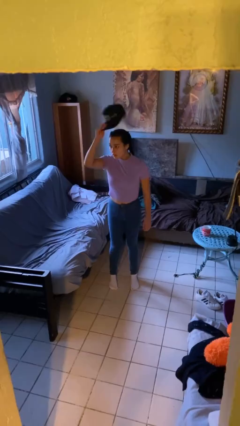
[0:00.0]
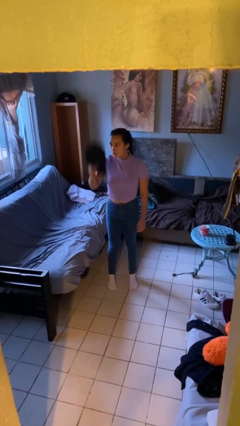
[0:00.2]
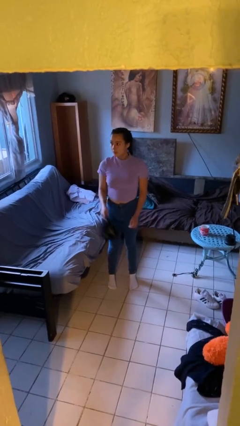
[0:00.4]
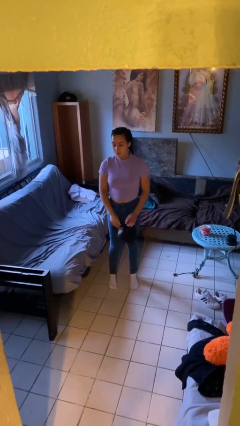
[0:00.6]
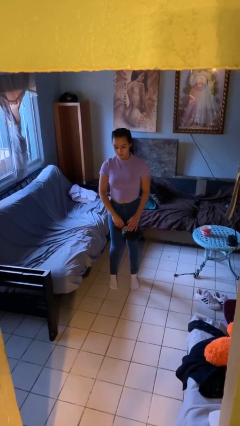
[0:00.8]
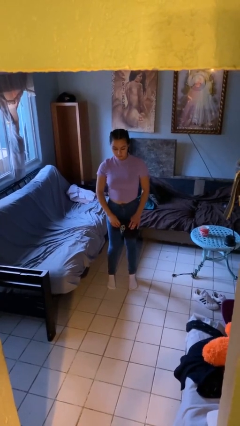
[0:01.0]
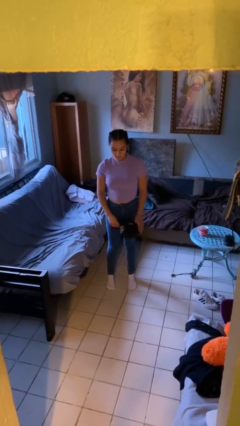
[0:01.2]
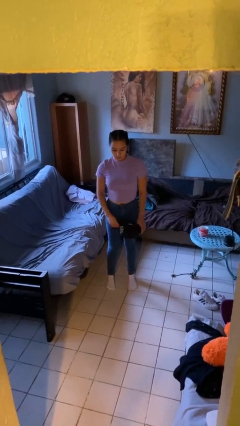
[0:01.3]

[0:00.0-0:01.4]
person takes off hat

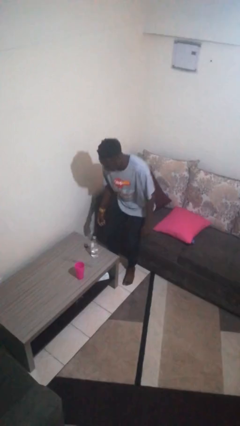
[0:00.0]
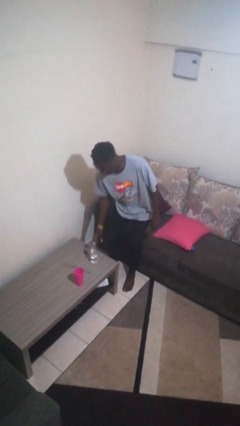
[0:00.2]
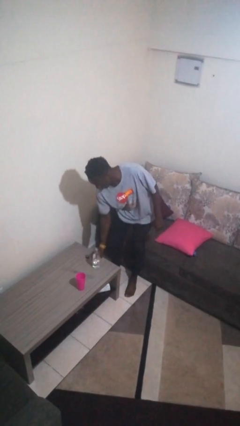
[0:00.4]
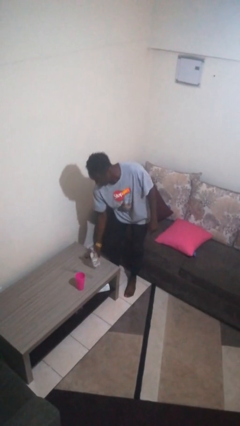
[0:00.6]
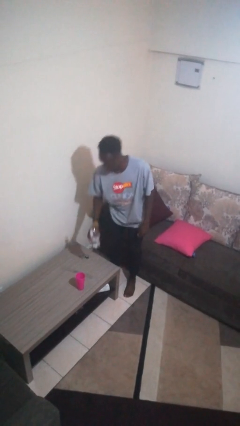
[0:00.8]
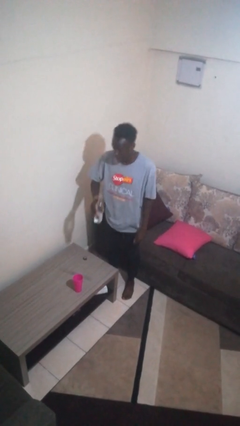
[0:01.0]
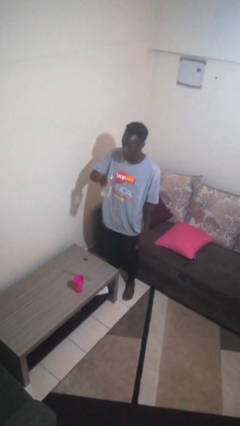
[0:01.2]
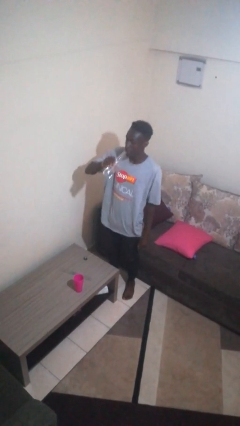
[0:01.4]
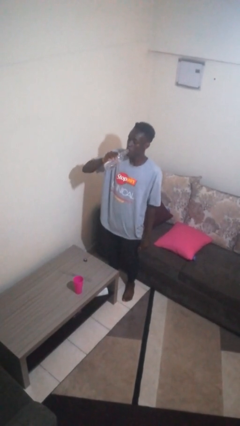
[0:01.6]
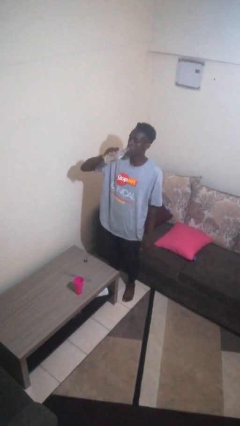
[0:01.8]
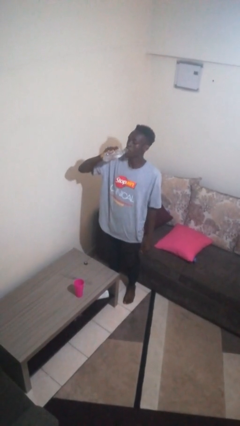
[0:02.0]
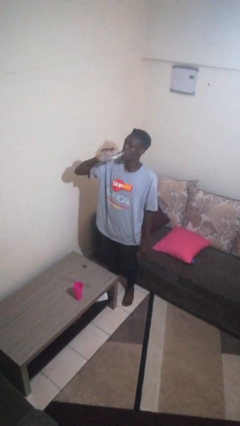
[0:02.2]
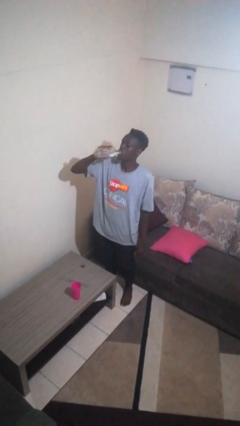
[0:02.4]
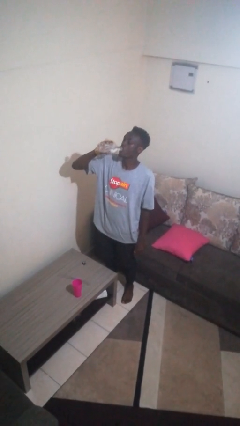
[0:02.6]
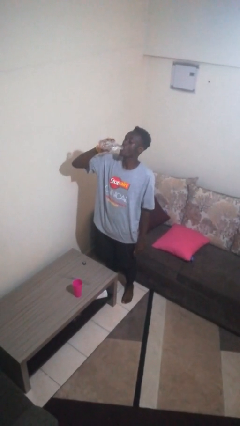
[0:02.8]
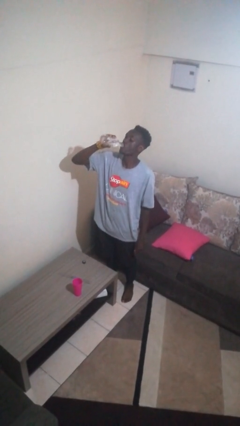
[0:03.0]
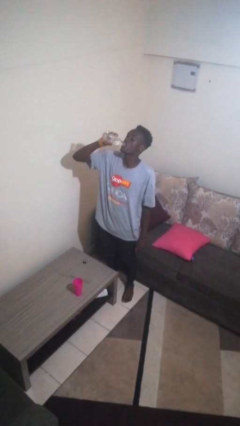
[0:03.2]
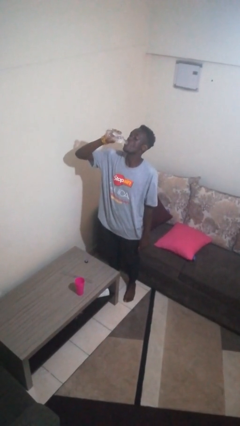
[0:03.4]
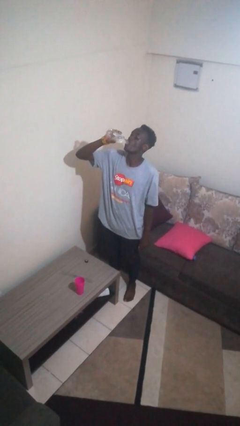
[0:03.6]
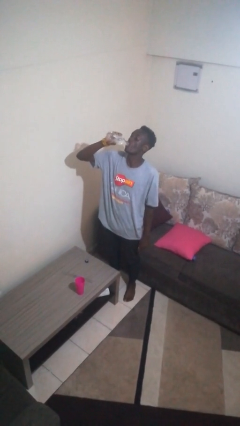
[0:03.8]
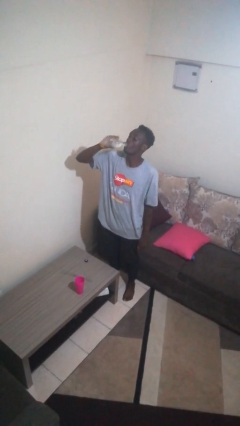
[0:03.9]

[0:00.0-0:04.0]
person drinks from bottle

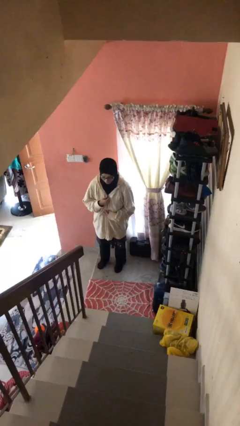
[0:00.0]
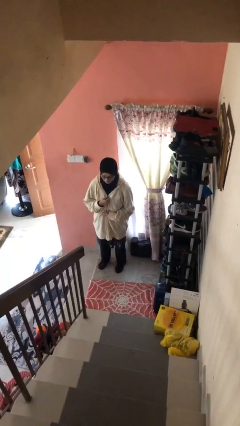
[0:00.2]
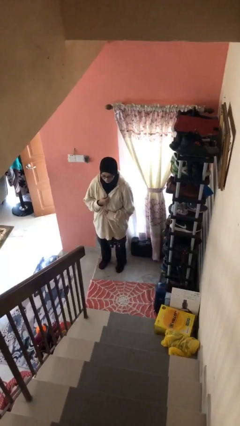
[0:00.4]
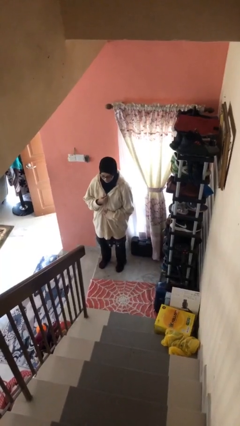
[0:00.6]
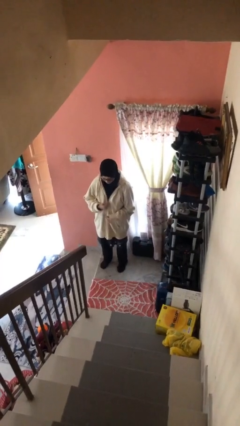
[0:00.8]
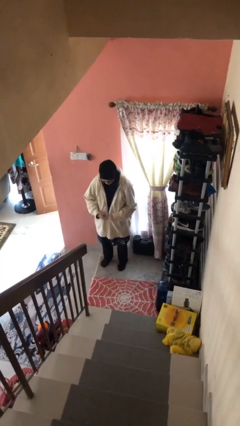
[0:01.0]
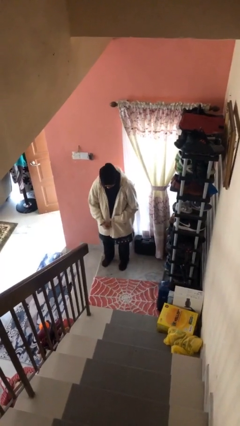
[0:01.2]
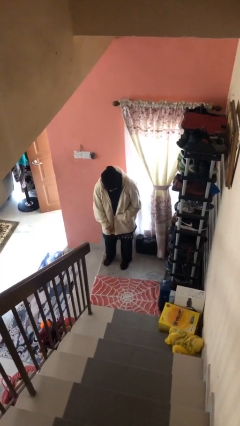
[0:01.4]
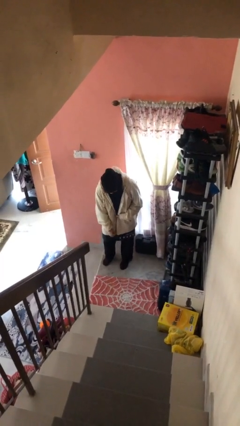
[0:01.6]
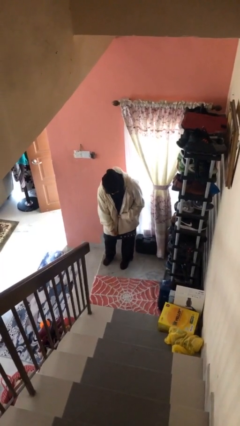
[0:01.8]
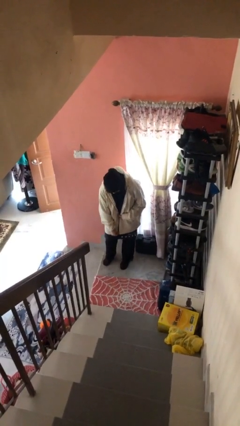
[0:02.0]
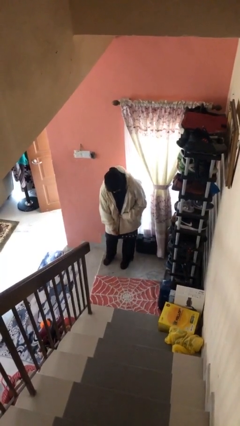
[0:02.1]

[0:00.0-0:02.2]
person unzips jacket

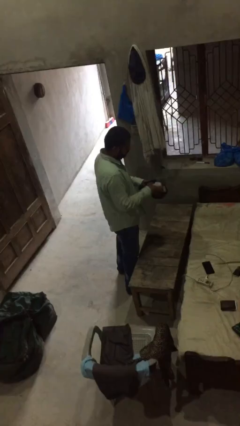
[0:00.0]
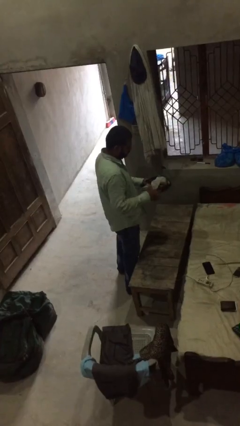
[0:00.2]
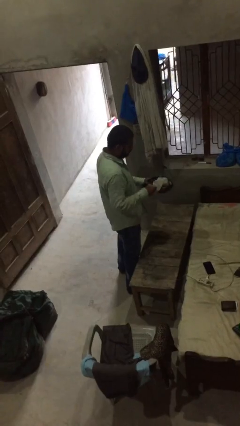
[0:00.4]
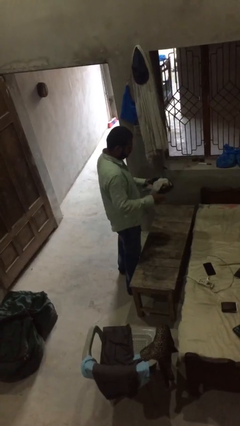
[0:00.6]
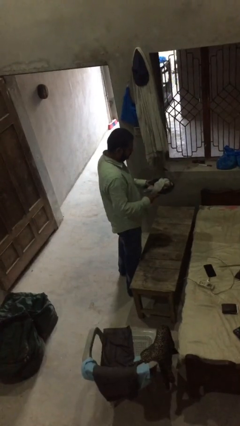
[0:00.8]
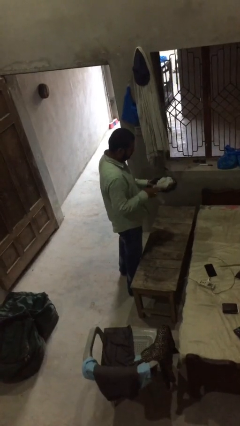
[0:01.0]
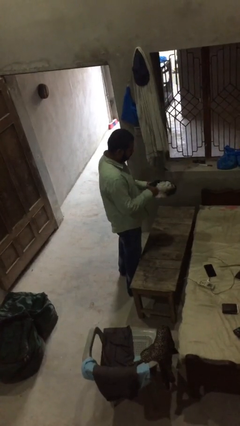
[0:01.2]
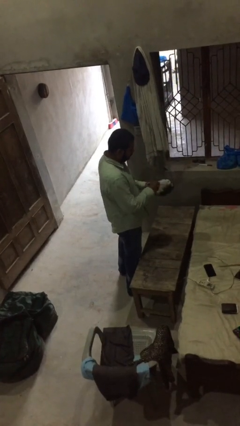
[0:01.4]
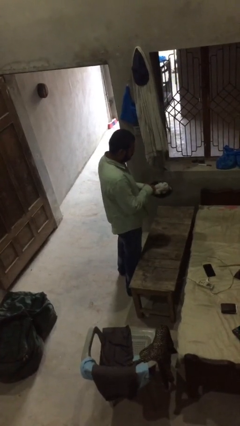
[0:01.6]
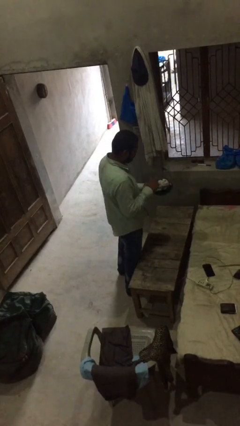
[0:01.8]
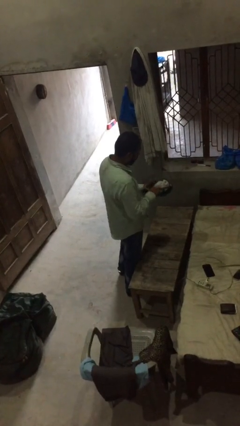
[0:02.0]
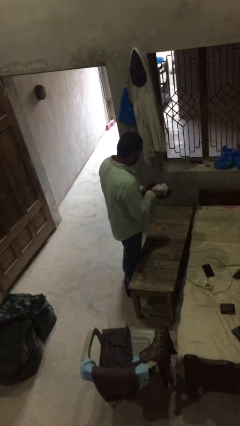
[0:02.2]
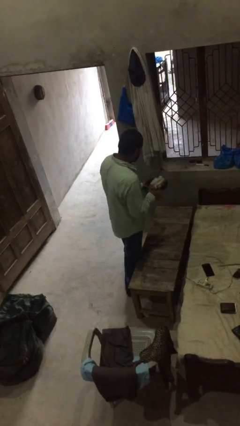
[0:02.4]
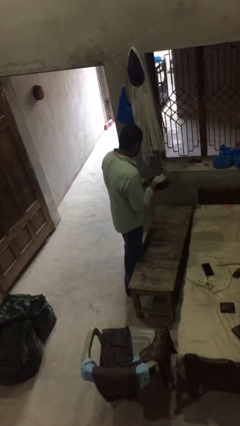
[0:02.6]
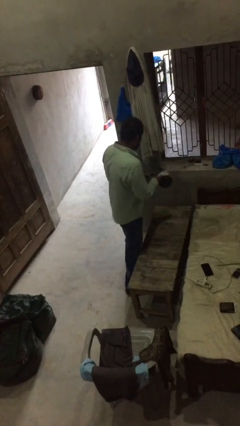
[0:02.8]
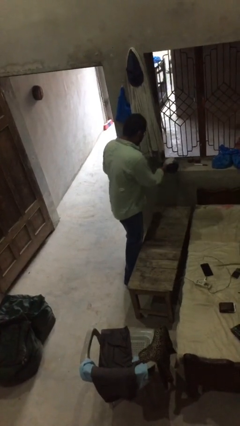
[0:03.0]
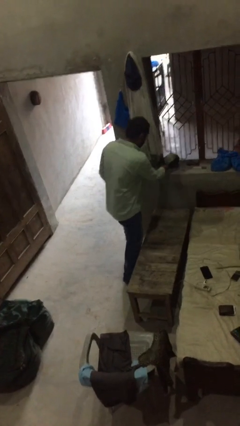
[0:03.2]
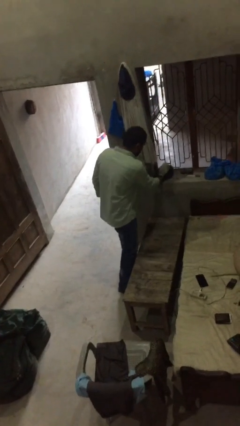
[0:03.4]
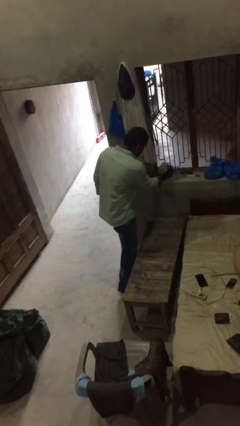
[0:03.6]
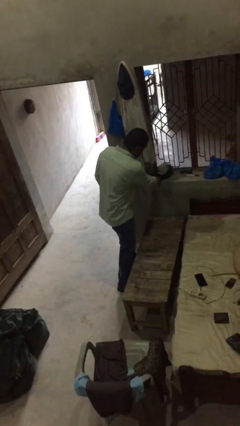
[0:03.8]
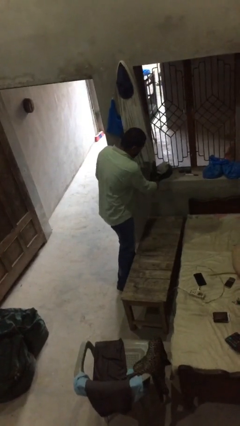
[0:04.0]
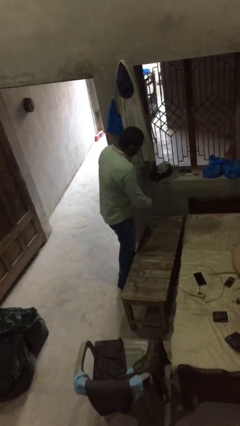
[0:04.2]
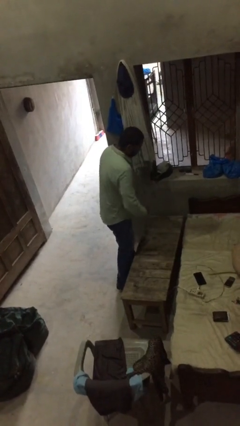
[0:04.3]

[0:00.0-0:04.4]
person puts down object on shelf

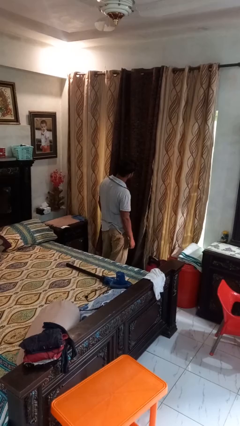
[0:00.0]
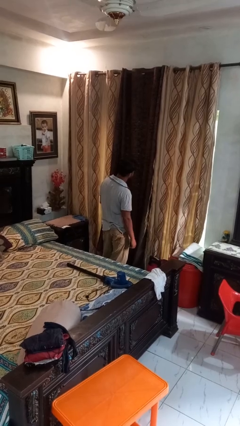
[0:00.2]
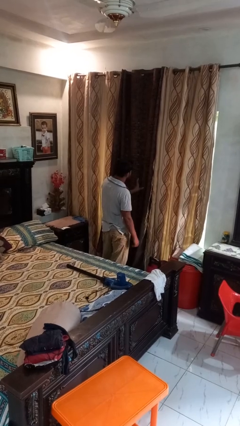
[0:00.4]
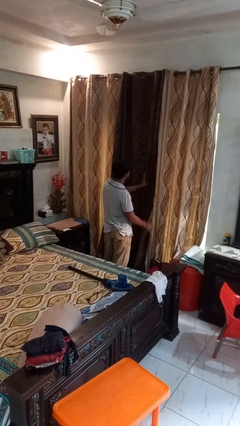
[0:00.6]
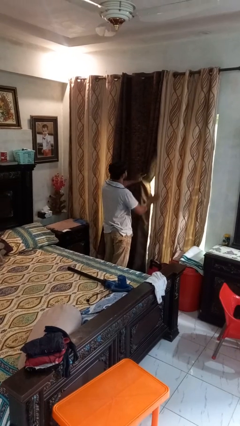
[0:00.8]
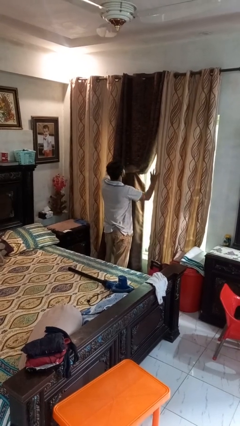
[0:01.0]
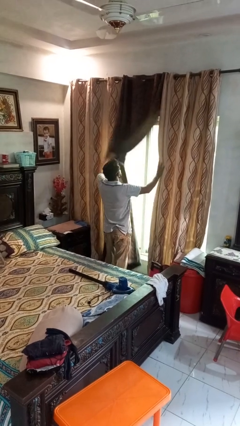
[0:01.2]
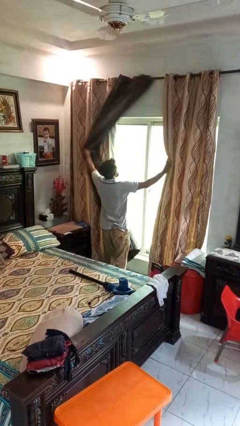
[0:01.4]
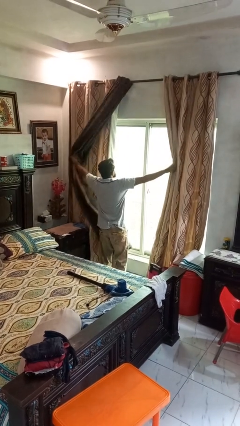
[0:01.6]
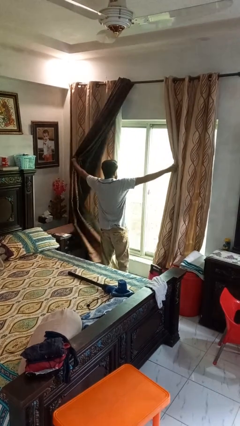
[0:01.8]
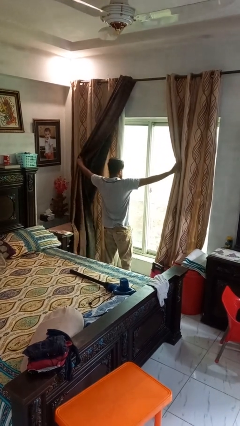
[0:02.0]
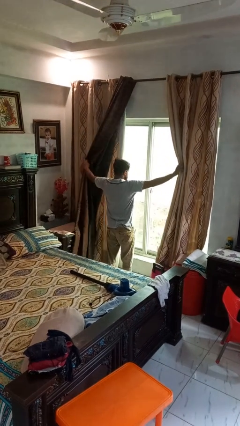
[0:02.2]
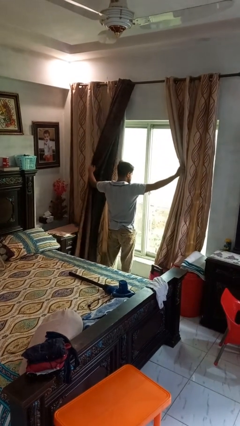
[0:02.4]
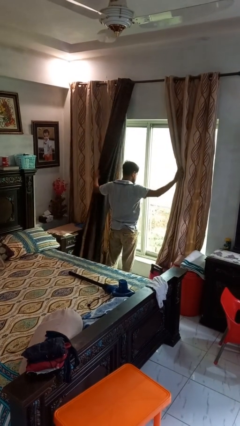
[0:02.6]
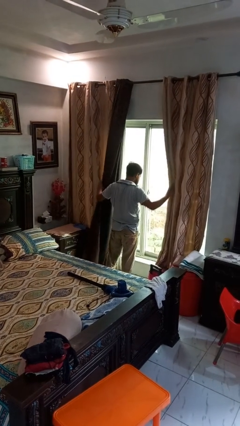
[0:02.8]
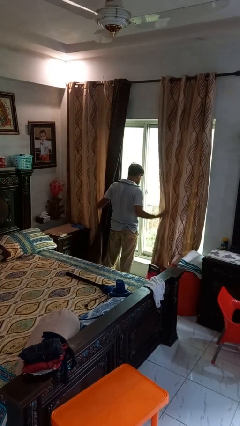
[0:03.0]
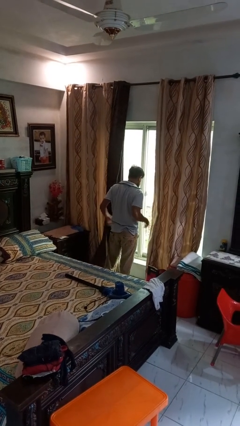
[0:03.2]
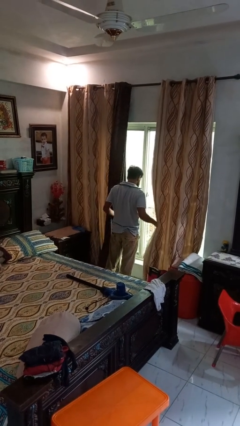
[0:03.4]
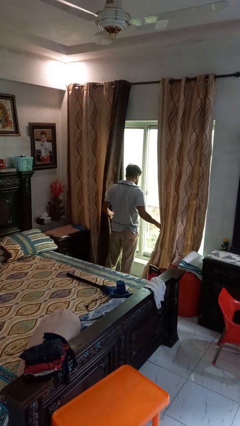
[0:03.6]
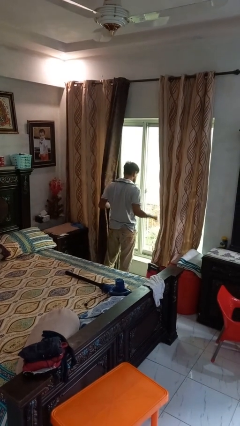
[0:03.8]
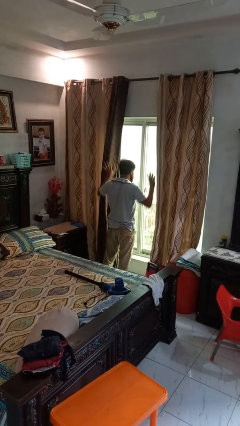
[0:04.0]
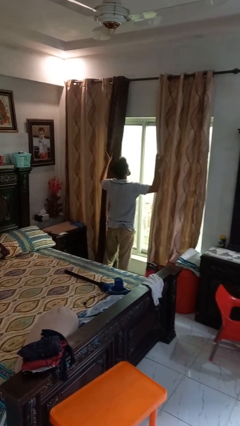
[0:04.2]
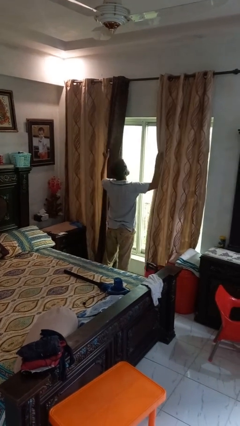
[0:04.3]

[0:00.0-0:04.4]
person opens curtains

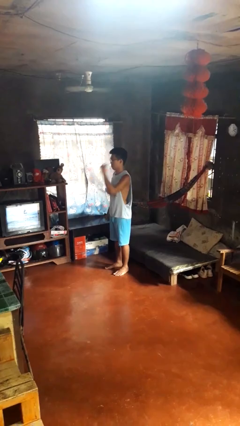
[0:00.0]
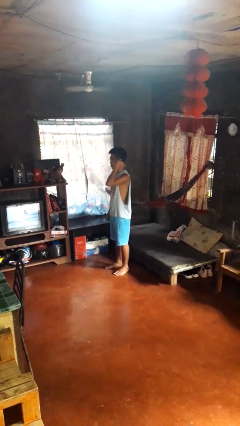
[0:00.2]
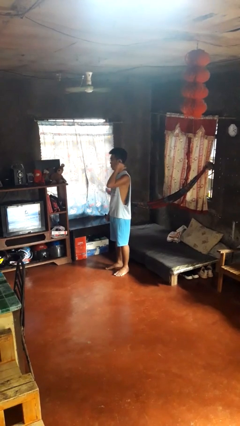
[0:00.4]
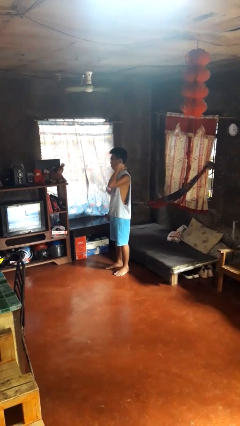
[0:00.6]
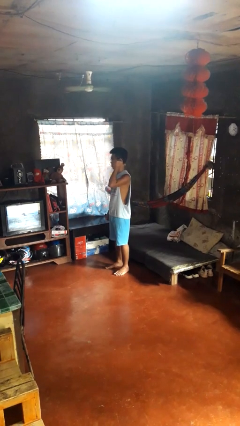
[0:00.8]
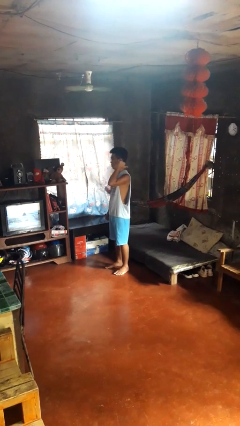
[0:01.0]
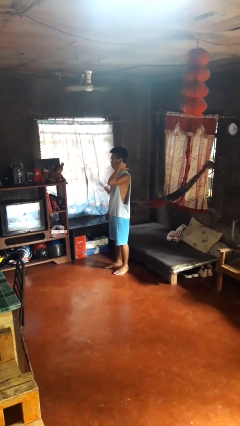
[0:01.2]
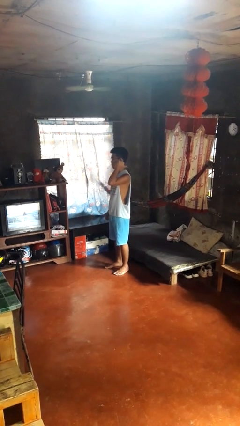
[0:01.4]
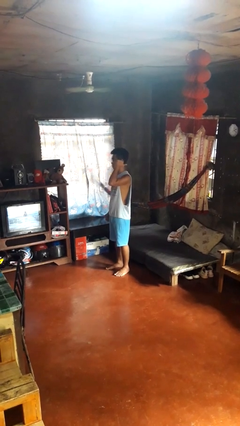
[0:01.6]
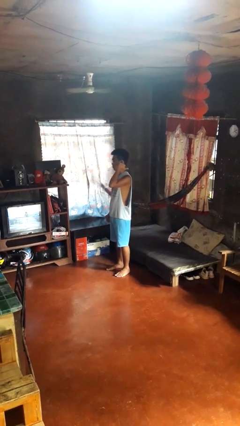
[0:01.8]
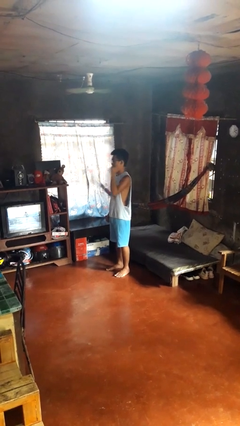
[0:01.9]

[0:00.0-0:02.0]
person gestures behind me
